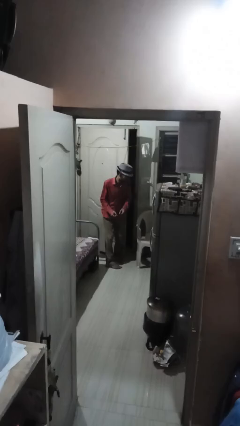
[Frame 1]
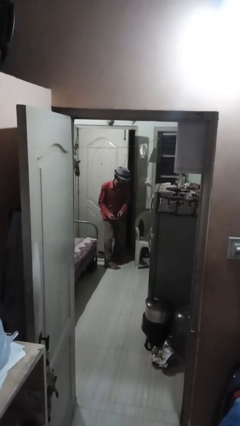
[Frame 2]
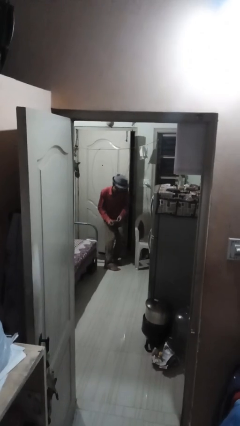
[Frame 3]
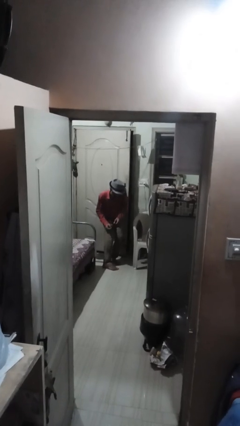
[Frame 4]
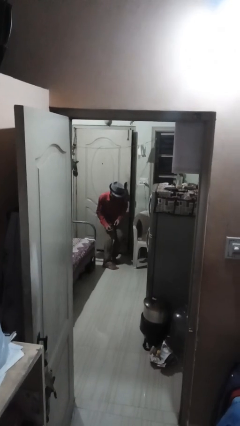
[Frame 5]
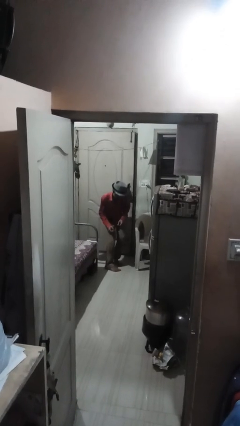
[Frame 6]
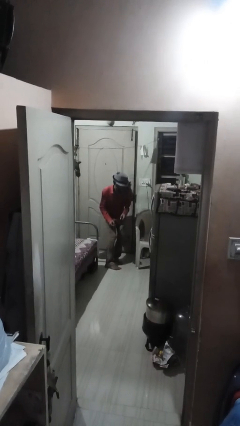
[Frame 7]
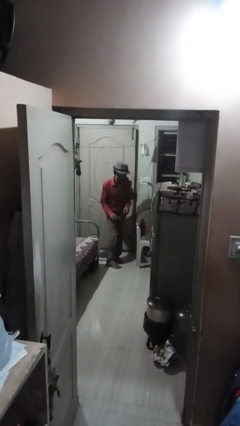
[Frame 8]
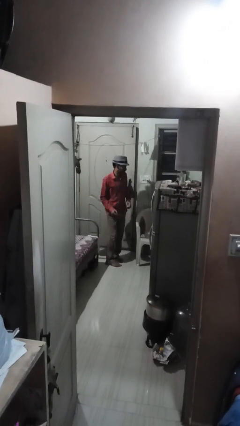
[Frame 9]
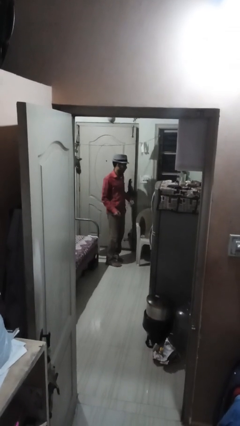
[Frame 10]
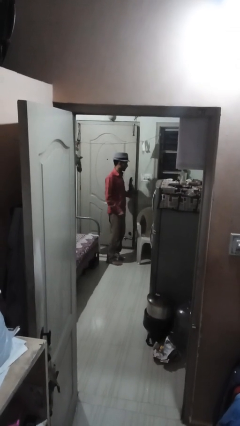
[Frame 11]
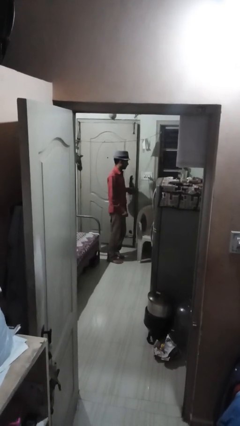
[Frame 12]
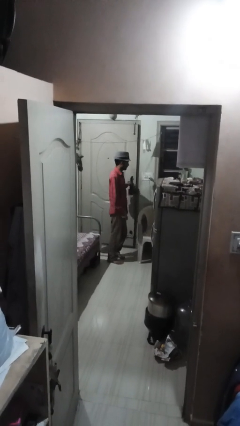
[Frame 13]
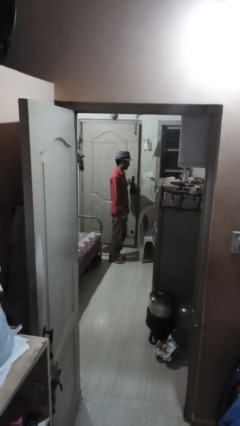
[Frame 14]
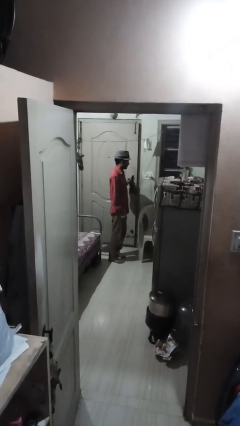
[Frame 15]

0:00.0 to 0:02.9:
person closes door with hip

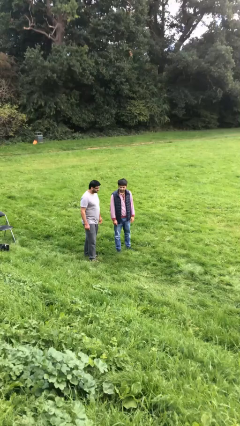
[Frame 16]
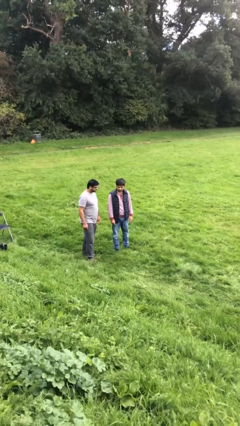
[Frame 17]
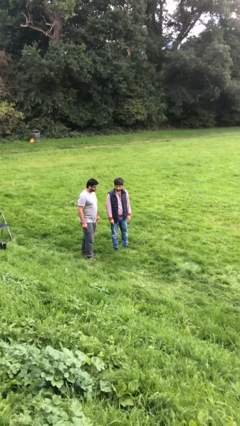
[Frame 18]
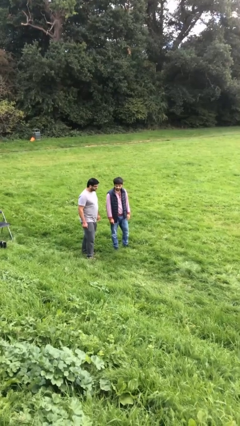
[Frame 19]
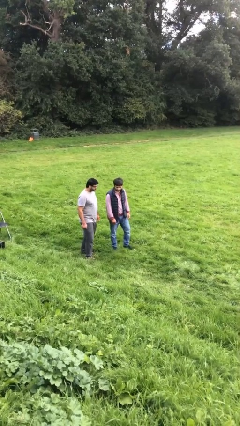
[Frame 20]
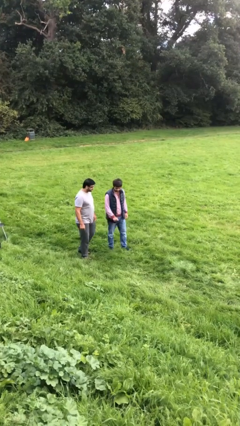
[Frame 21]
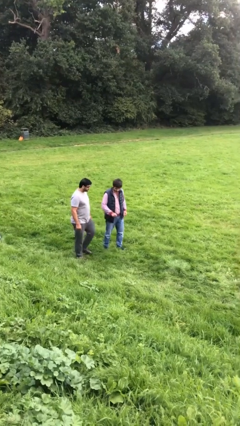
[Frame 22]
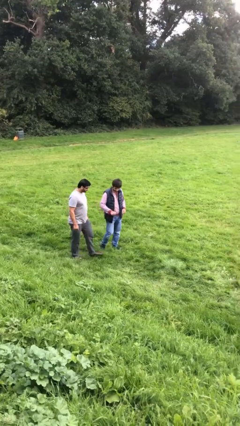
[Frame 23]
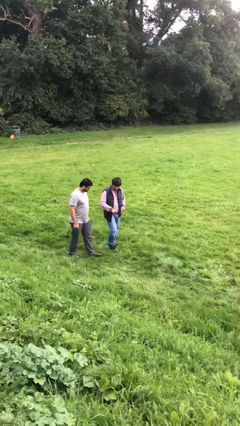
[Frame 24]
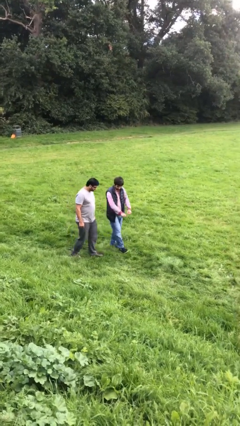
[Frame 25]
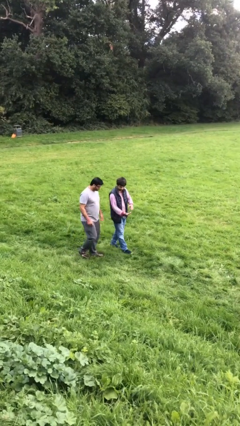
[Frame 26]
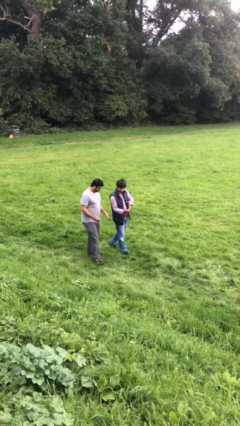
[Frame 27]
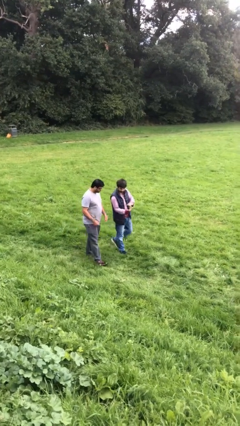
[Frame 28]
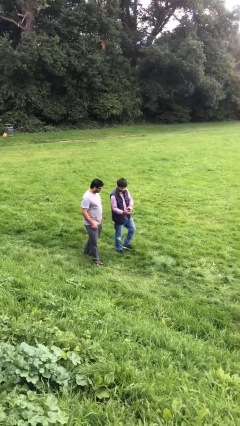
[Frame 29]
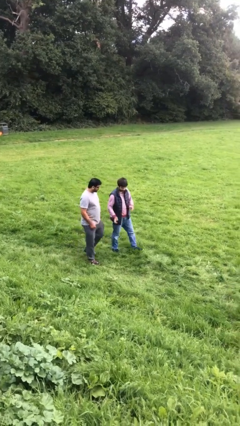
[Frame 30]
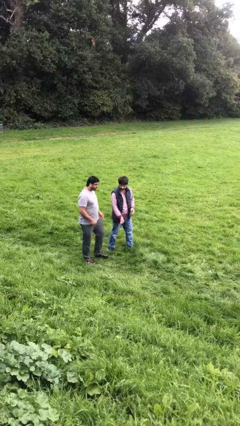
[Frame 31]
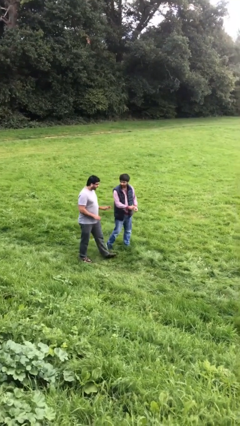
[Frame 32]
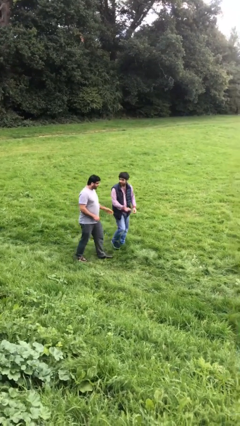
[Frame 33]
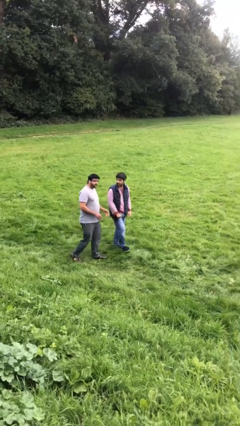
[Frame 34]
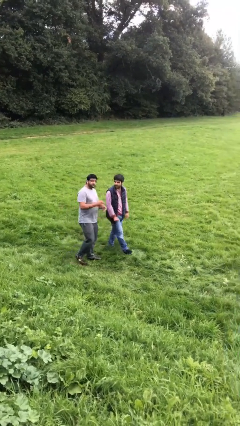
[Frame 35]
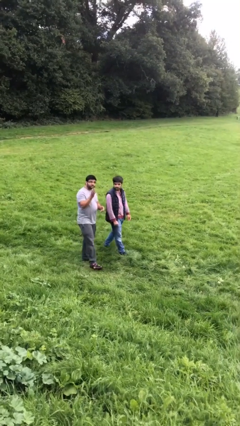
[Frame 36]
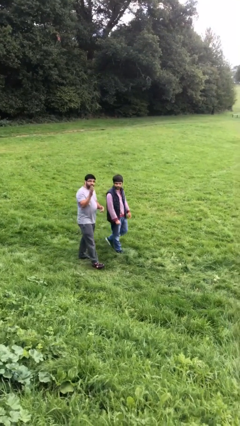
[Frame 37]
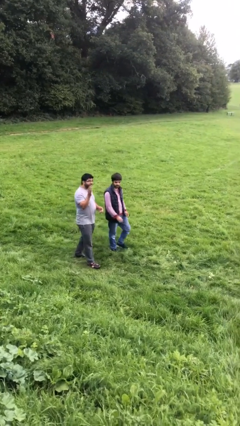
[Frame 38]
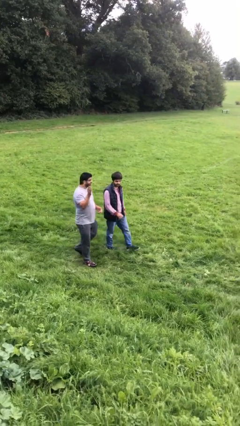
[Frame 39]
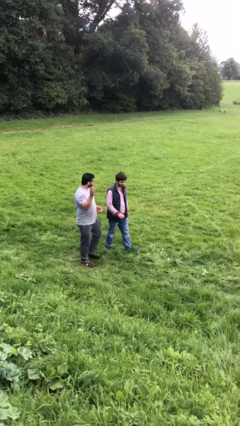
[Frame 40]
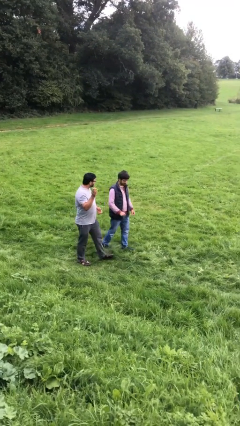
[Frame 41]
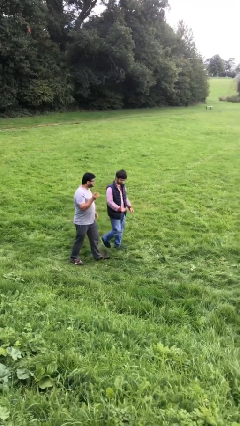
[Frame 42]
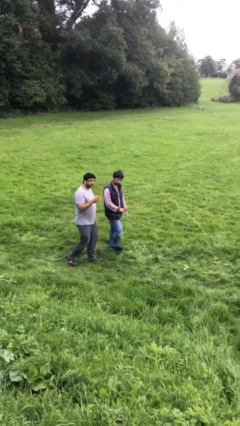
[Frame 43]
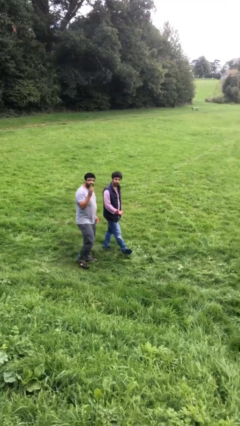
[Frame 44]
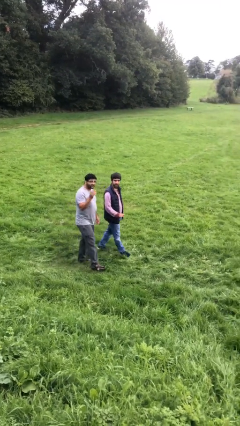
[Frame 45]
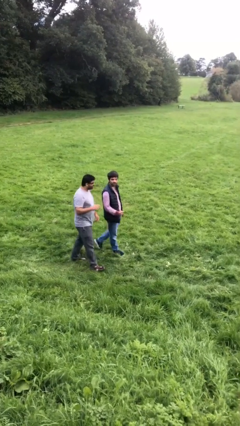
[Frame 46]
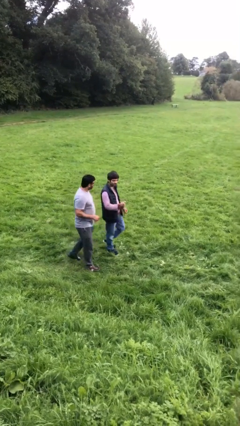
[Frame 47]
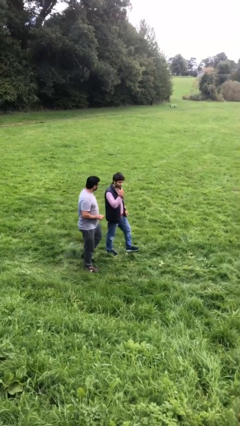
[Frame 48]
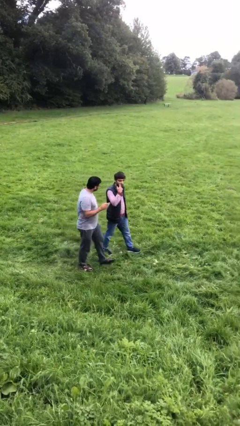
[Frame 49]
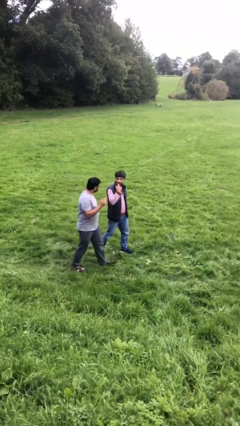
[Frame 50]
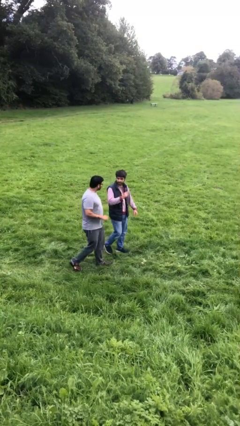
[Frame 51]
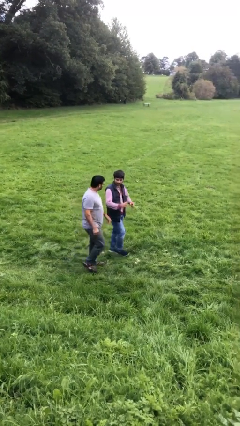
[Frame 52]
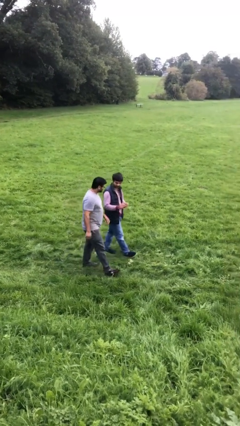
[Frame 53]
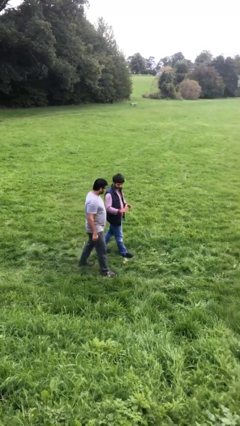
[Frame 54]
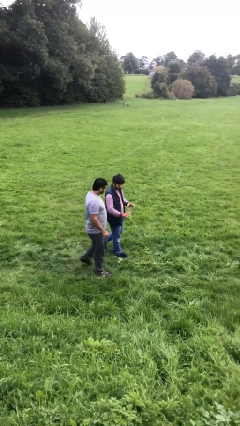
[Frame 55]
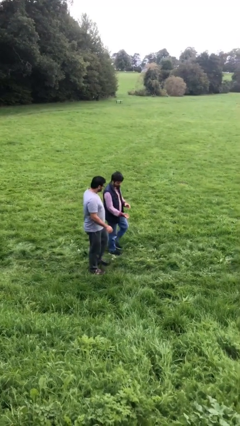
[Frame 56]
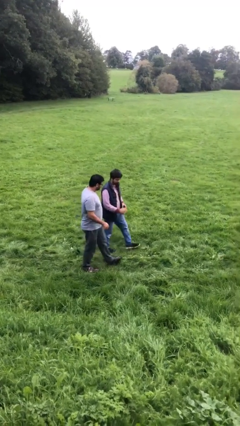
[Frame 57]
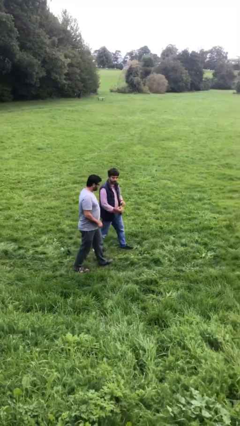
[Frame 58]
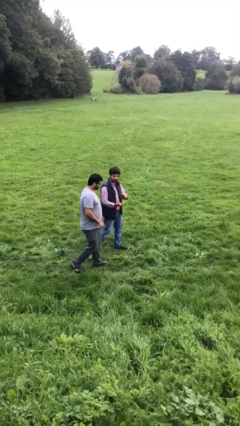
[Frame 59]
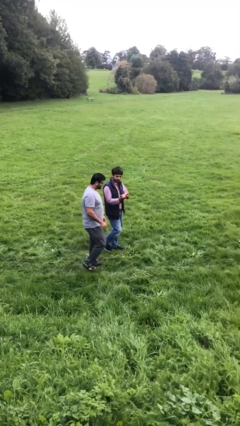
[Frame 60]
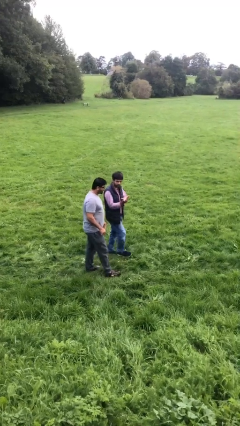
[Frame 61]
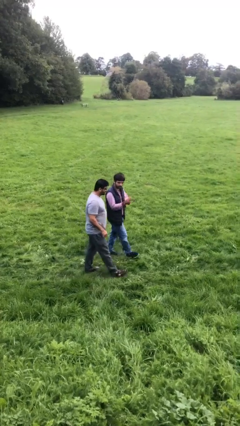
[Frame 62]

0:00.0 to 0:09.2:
person talks to person

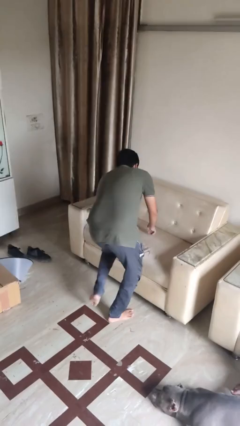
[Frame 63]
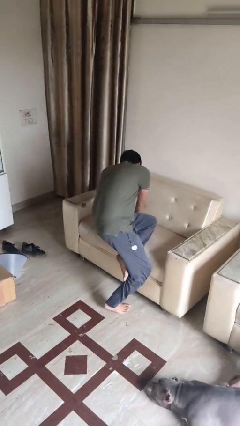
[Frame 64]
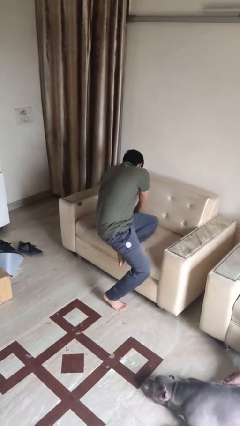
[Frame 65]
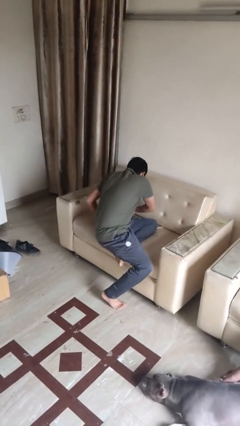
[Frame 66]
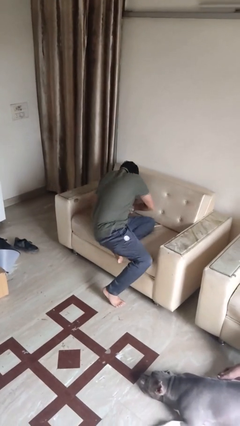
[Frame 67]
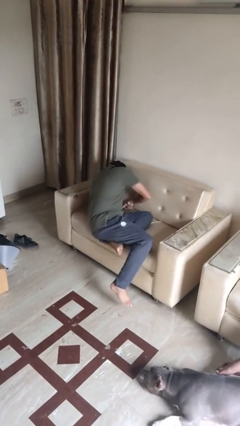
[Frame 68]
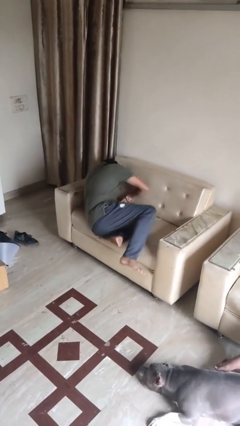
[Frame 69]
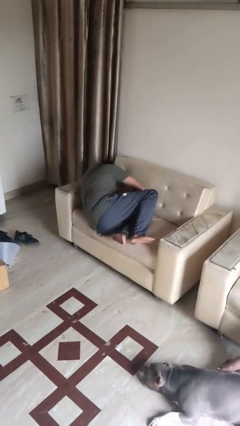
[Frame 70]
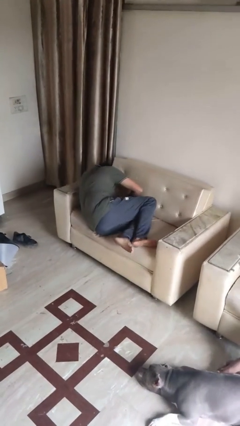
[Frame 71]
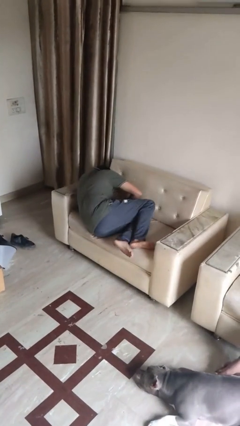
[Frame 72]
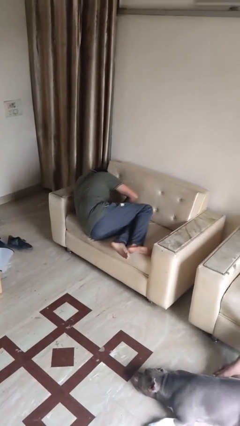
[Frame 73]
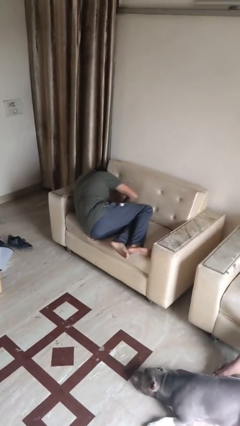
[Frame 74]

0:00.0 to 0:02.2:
person lies down on bed

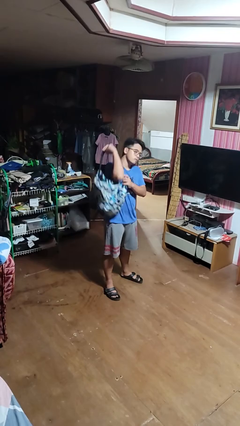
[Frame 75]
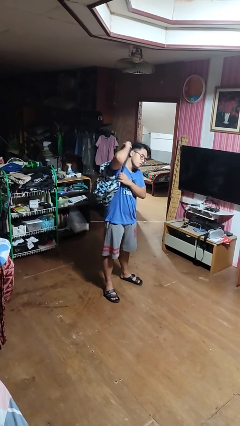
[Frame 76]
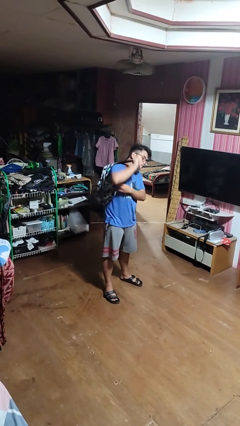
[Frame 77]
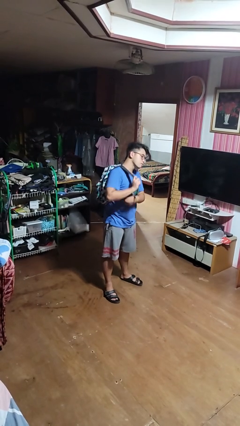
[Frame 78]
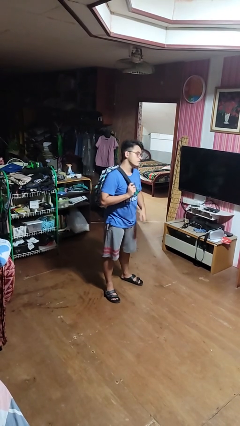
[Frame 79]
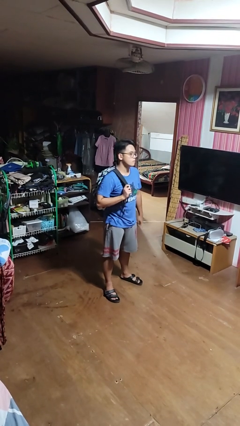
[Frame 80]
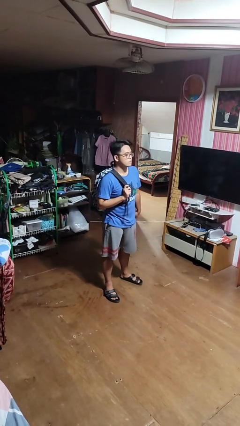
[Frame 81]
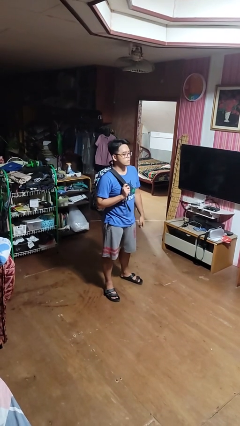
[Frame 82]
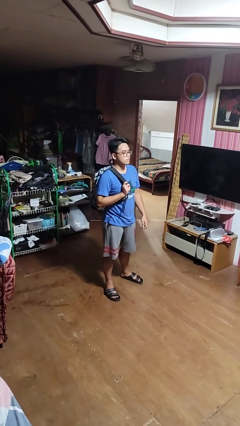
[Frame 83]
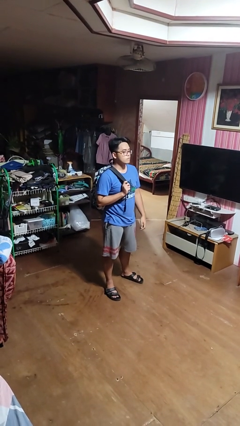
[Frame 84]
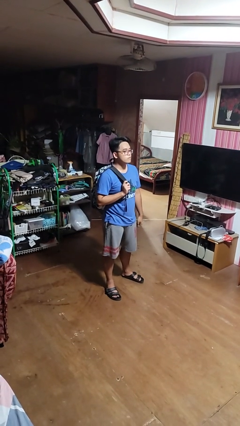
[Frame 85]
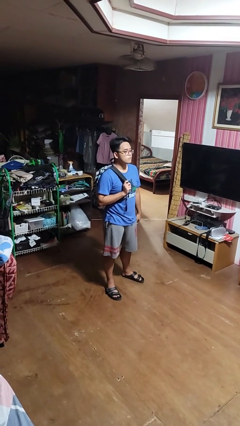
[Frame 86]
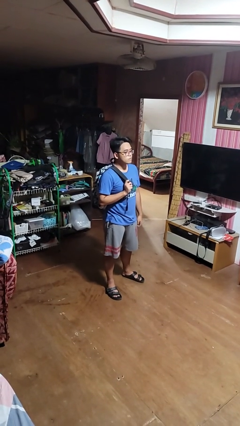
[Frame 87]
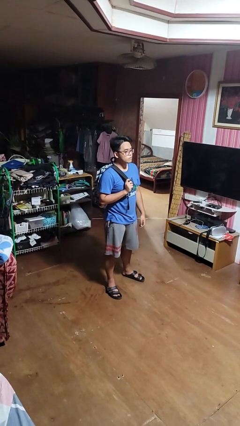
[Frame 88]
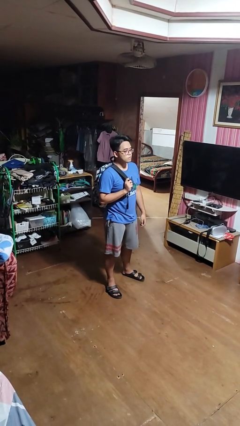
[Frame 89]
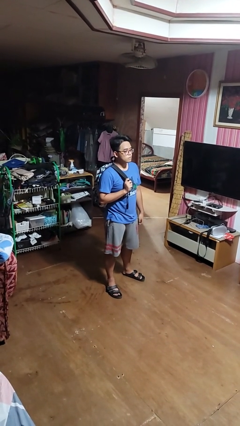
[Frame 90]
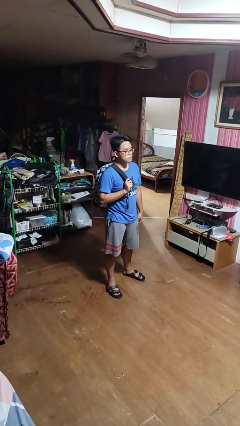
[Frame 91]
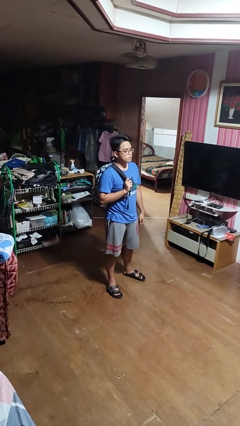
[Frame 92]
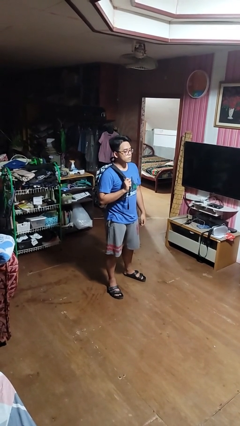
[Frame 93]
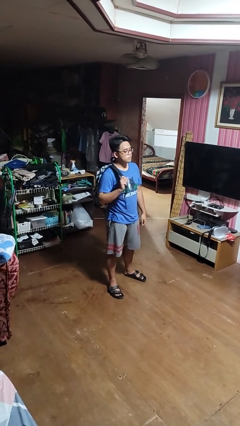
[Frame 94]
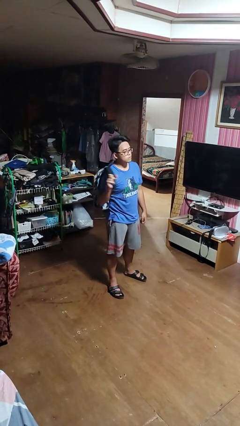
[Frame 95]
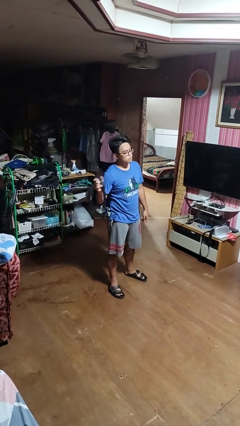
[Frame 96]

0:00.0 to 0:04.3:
person puts on backpack
